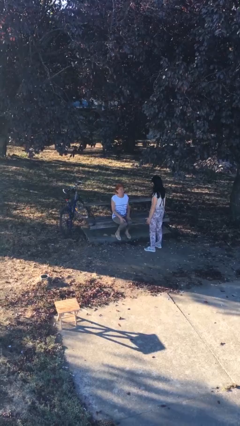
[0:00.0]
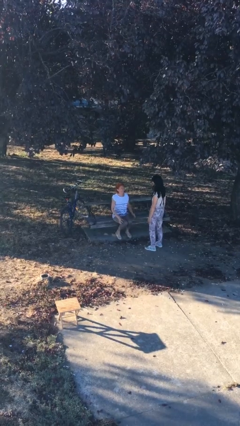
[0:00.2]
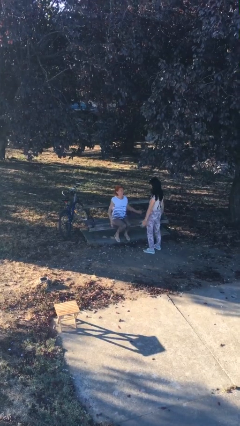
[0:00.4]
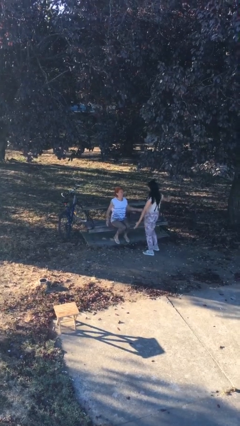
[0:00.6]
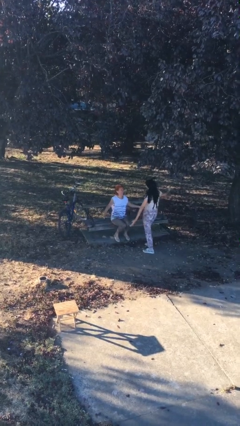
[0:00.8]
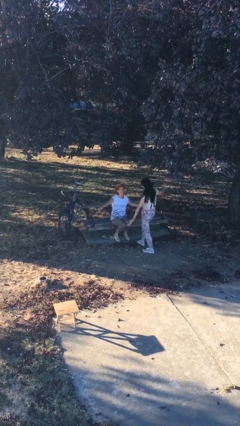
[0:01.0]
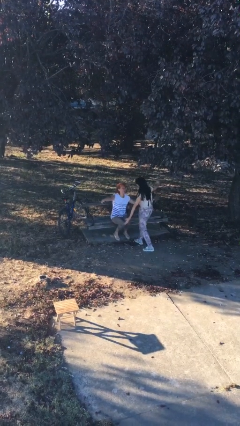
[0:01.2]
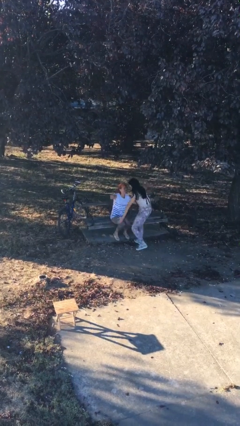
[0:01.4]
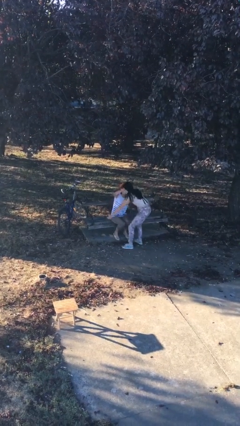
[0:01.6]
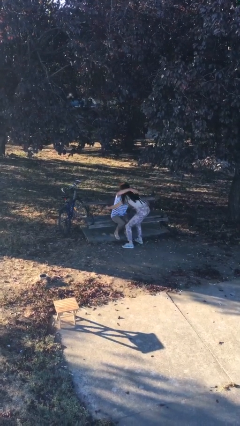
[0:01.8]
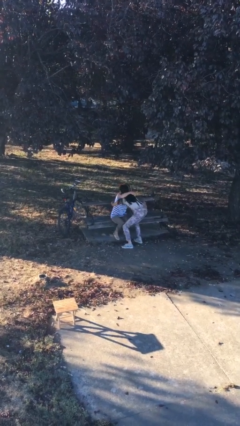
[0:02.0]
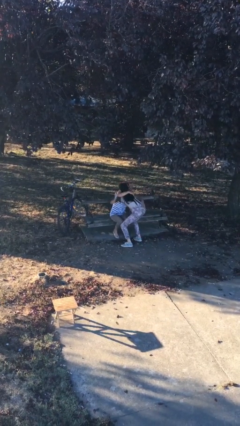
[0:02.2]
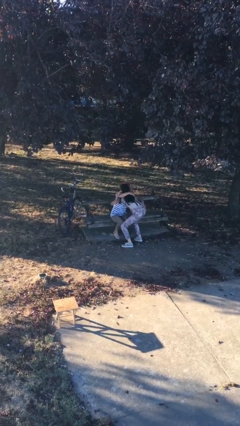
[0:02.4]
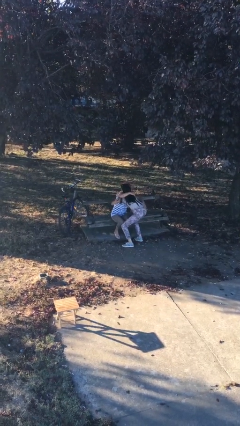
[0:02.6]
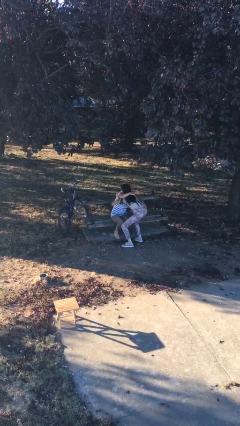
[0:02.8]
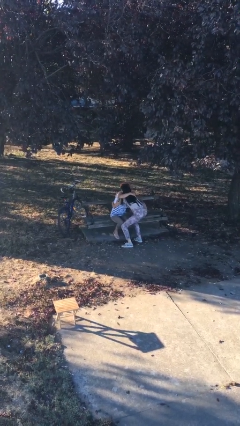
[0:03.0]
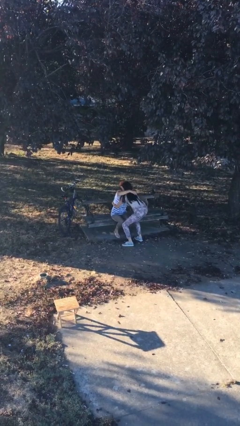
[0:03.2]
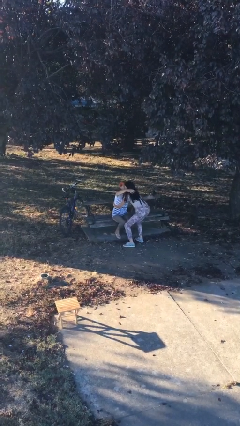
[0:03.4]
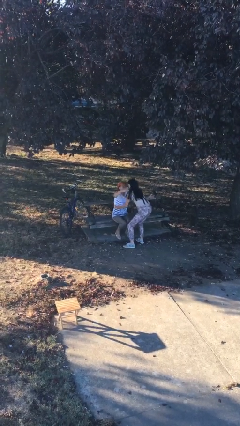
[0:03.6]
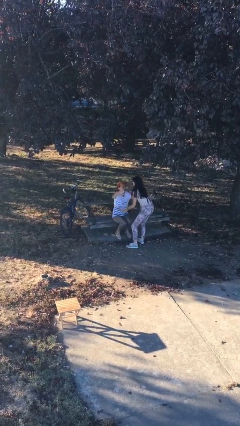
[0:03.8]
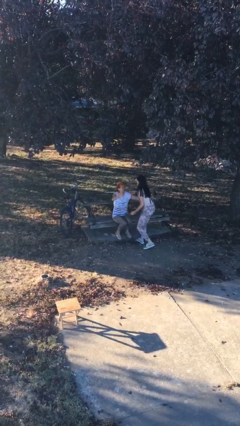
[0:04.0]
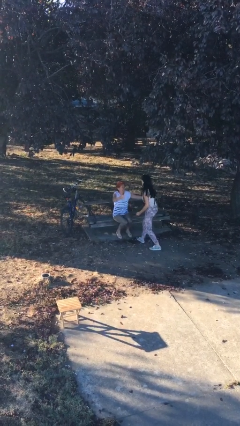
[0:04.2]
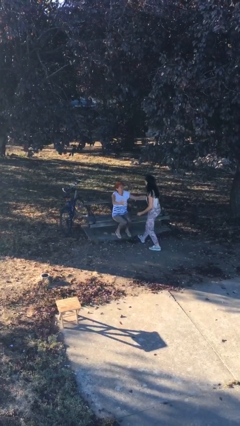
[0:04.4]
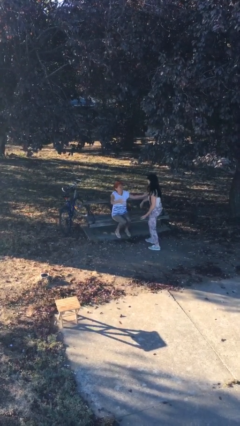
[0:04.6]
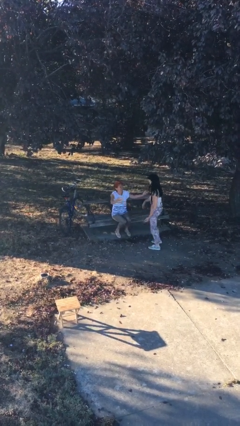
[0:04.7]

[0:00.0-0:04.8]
person embraces person

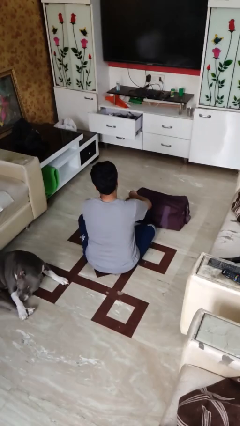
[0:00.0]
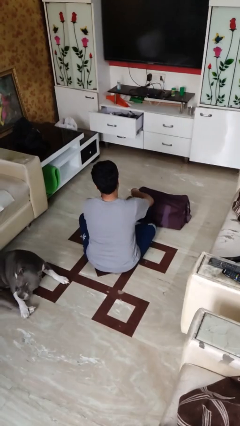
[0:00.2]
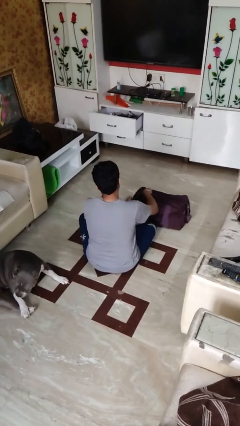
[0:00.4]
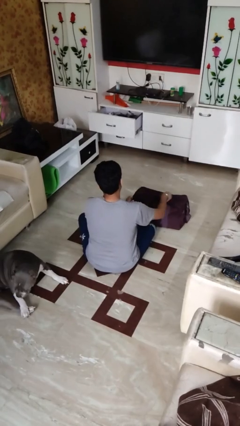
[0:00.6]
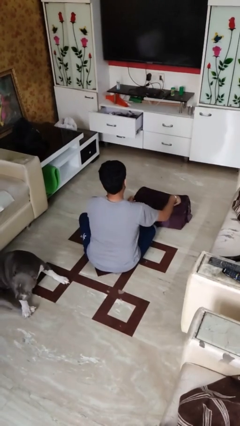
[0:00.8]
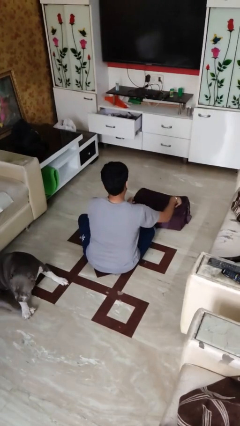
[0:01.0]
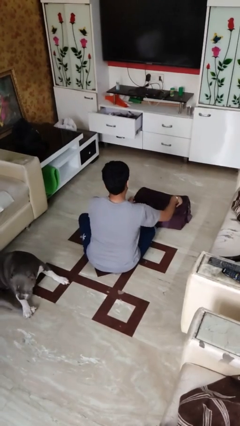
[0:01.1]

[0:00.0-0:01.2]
person opens suitcase

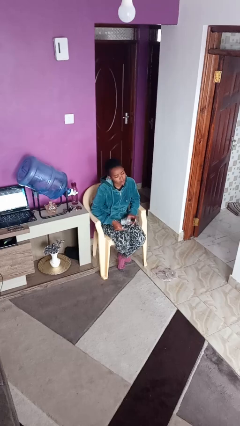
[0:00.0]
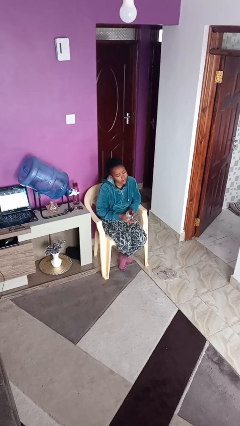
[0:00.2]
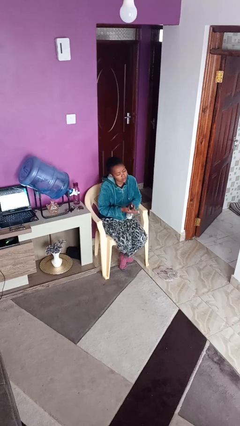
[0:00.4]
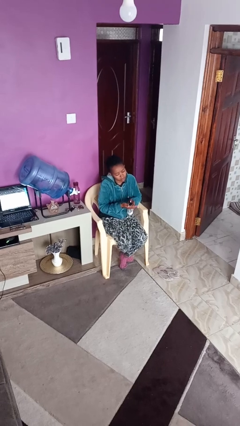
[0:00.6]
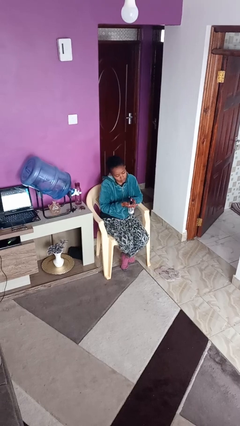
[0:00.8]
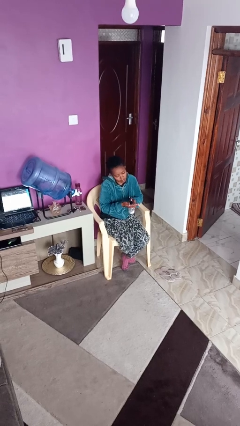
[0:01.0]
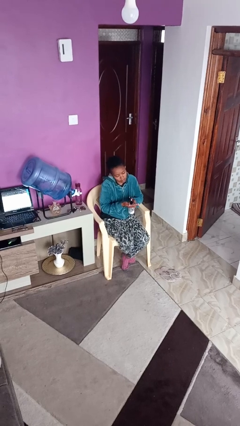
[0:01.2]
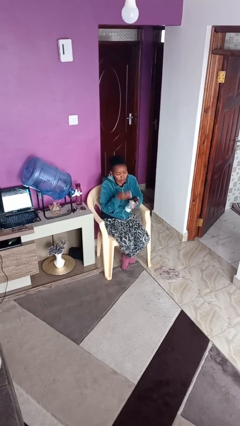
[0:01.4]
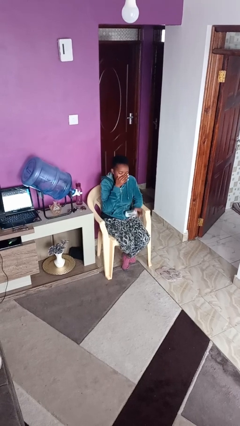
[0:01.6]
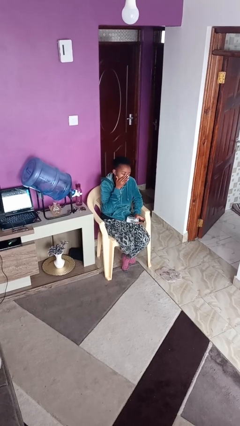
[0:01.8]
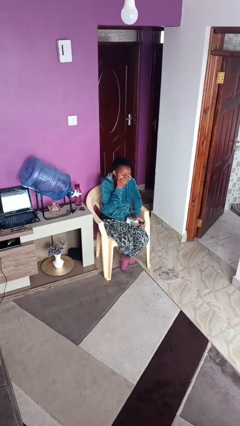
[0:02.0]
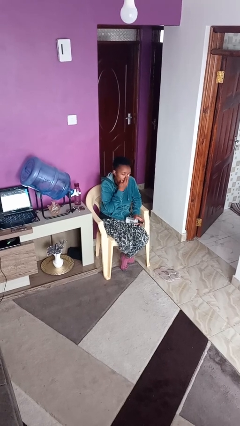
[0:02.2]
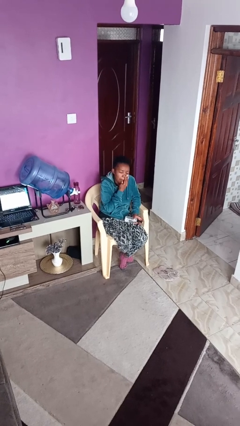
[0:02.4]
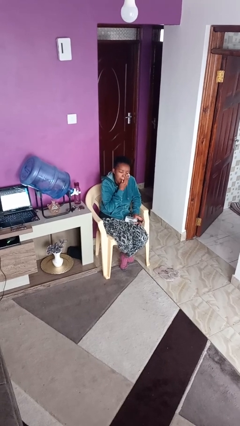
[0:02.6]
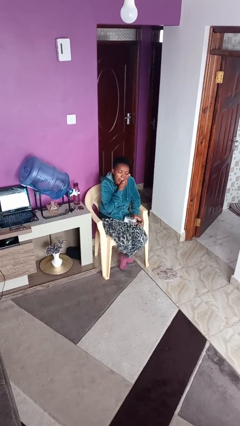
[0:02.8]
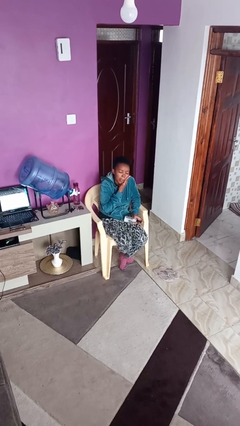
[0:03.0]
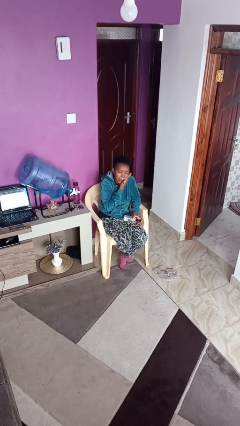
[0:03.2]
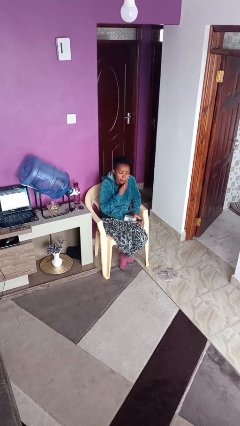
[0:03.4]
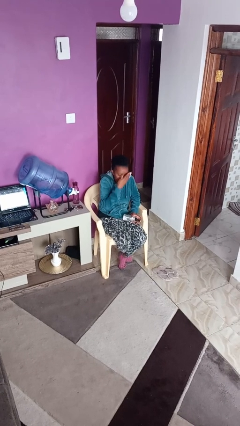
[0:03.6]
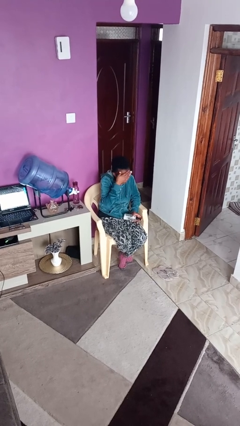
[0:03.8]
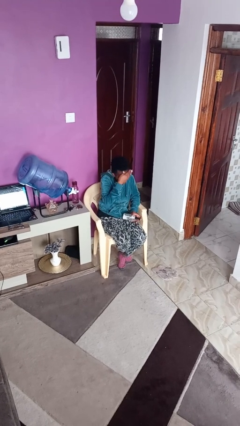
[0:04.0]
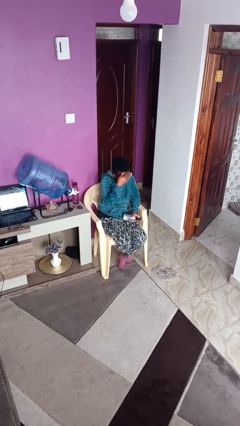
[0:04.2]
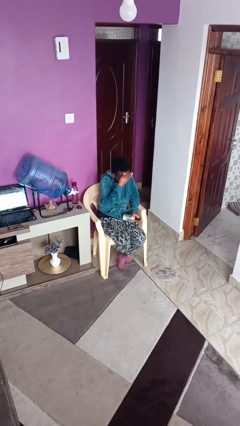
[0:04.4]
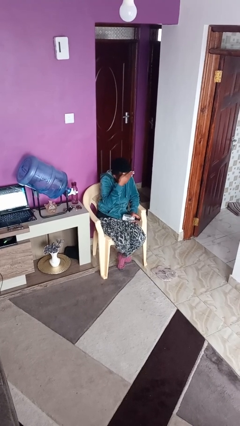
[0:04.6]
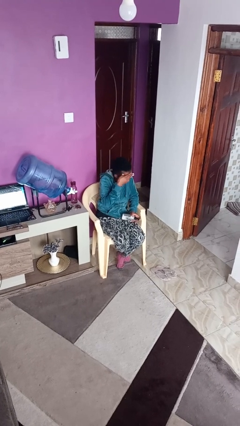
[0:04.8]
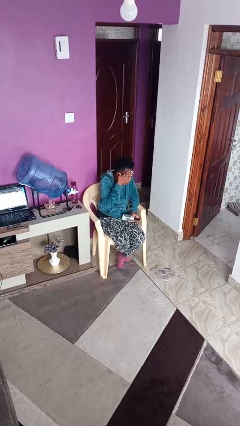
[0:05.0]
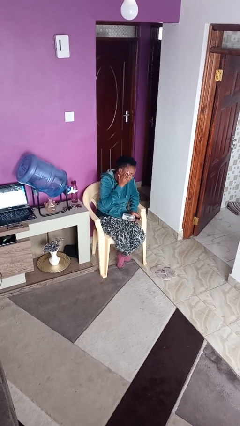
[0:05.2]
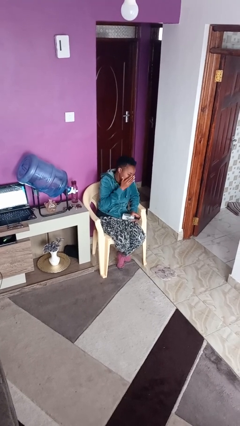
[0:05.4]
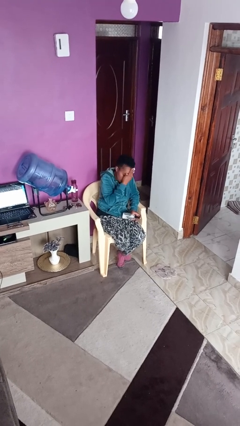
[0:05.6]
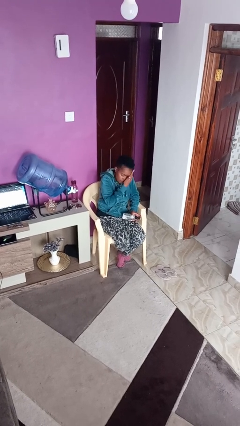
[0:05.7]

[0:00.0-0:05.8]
person applies facial moisturizer

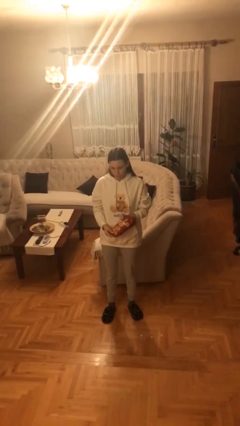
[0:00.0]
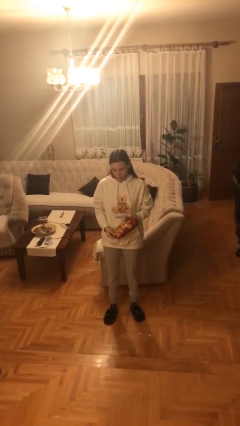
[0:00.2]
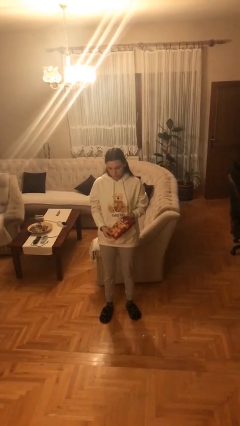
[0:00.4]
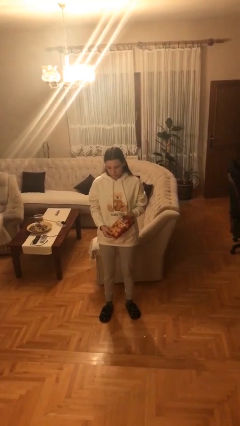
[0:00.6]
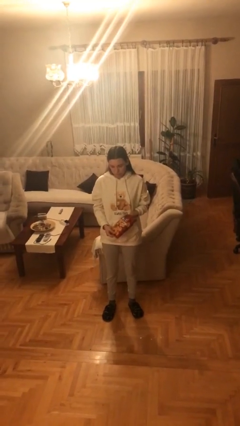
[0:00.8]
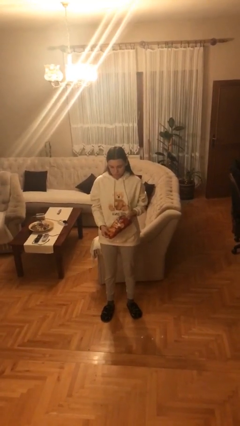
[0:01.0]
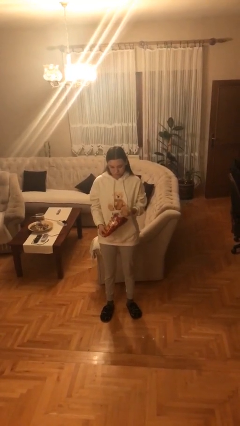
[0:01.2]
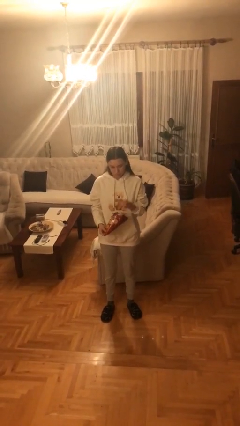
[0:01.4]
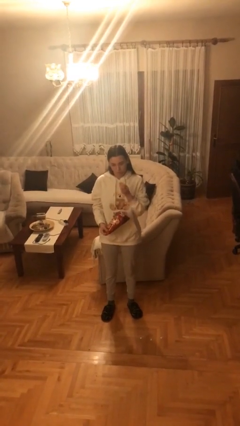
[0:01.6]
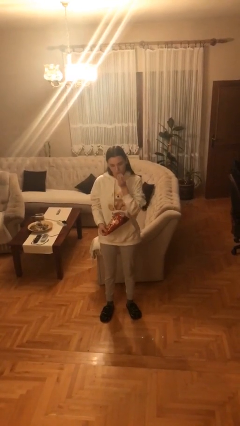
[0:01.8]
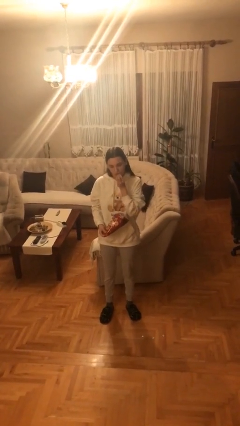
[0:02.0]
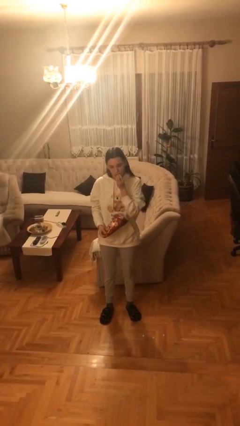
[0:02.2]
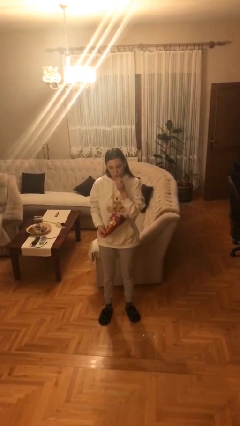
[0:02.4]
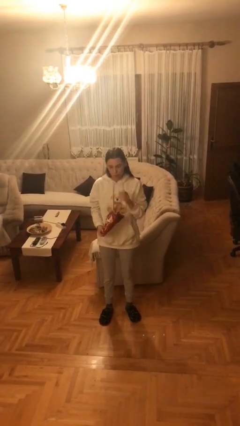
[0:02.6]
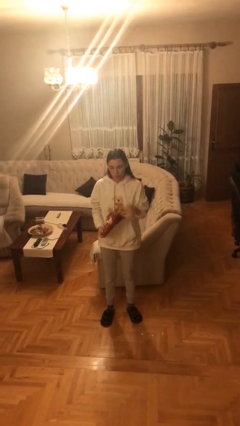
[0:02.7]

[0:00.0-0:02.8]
person eats snack from bag

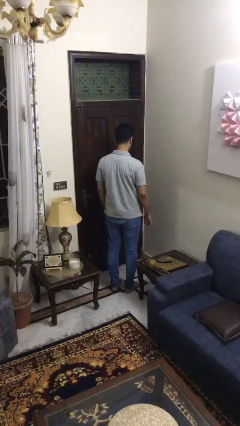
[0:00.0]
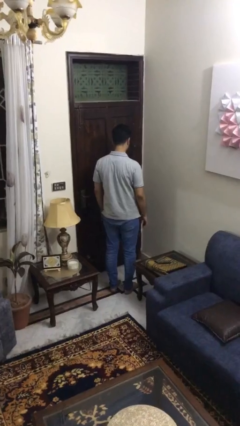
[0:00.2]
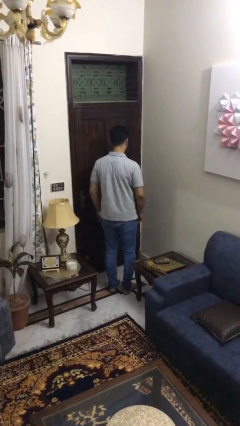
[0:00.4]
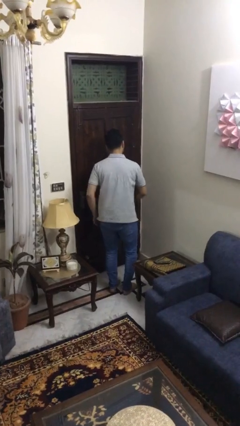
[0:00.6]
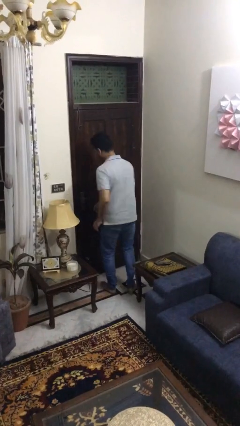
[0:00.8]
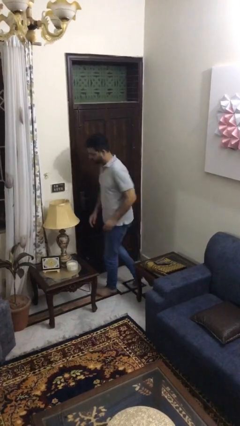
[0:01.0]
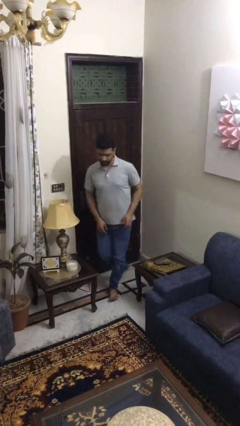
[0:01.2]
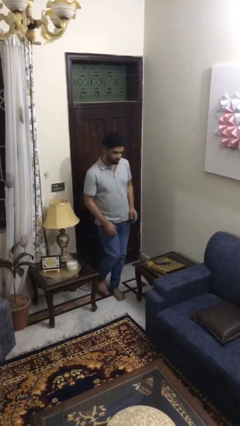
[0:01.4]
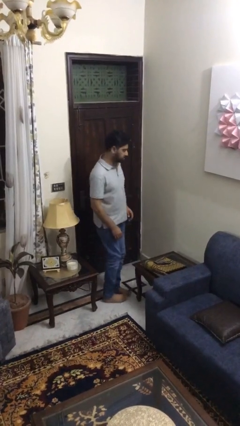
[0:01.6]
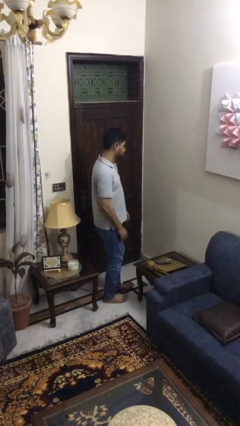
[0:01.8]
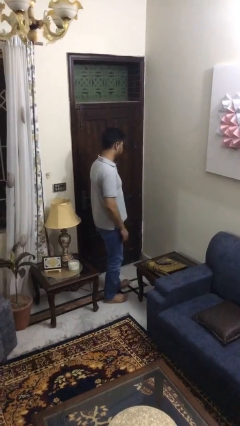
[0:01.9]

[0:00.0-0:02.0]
person twirls

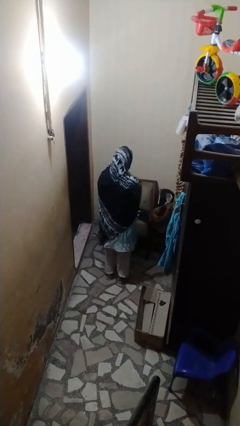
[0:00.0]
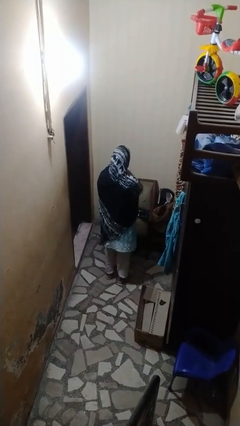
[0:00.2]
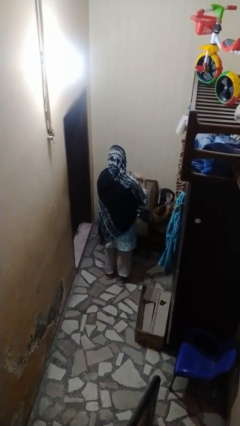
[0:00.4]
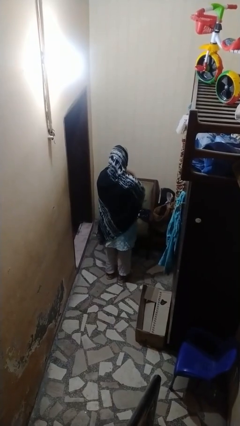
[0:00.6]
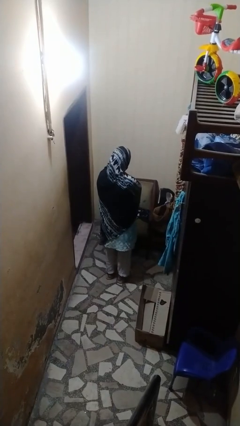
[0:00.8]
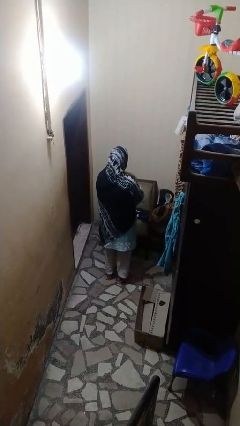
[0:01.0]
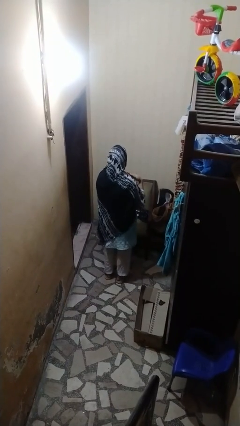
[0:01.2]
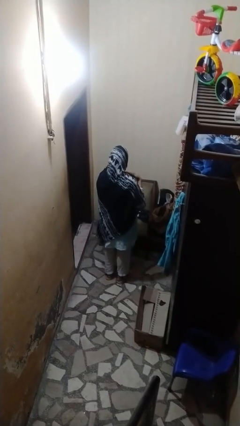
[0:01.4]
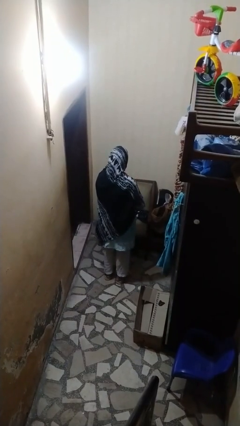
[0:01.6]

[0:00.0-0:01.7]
person gestures cut
